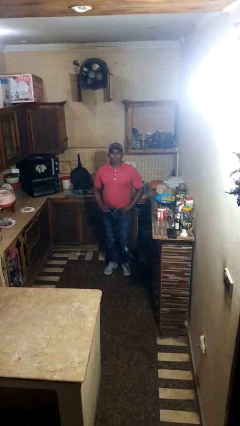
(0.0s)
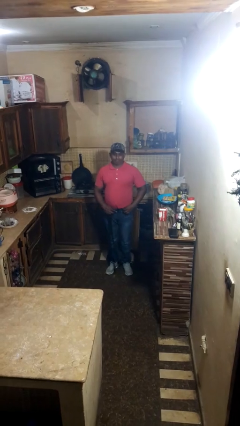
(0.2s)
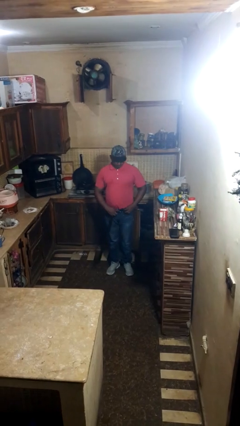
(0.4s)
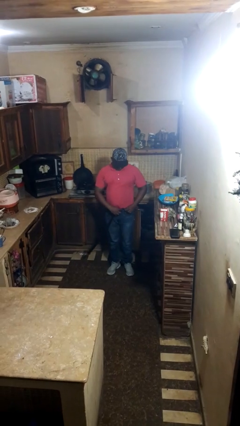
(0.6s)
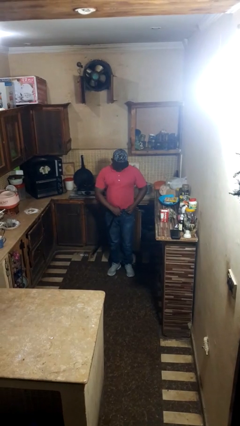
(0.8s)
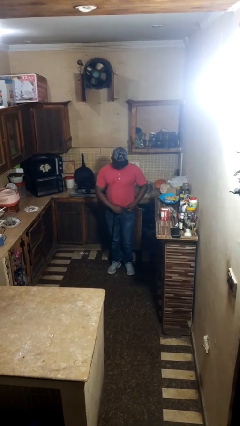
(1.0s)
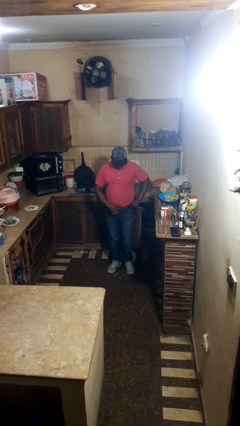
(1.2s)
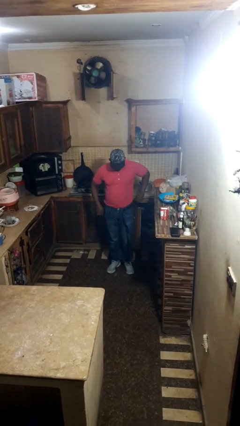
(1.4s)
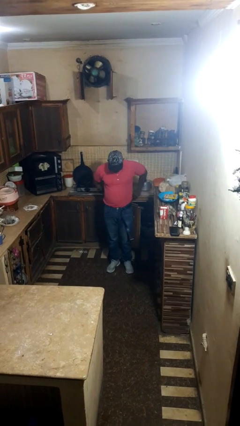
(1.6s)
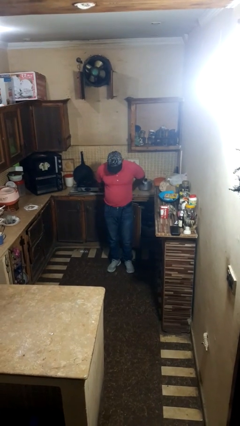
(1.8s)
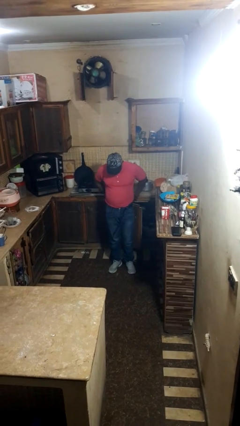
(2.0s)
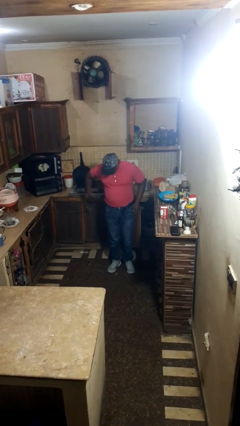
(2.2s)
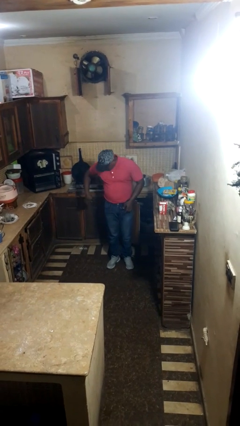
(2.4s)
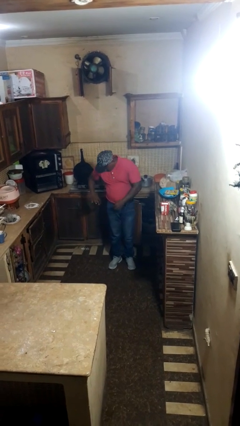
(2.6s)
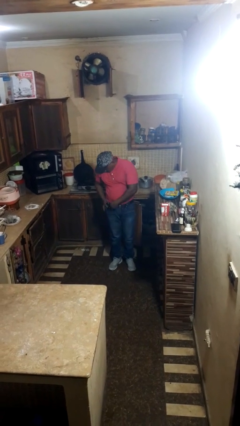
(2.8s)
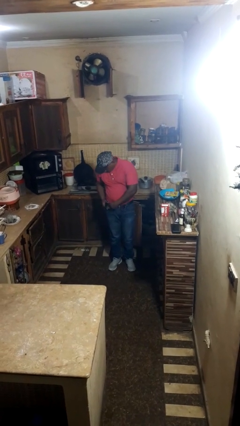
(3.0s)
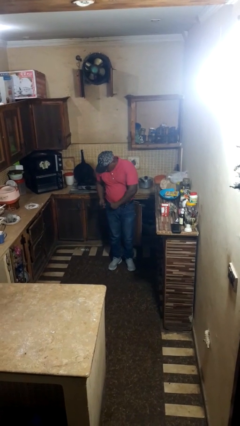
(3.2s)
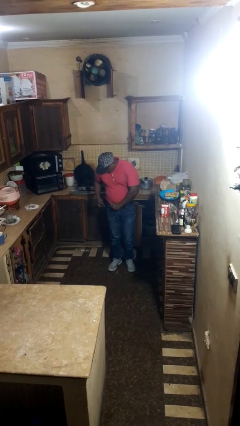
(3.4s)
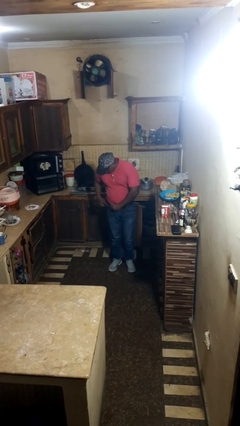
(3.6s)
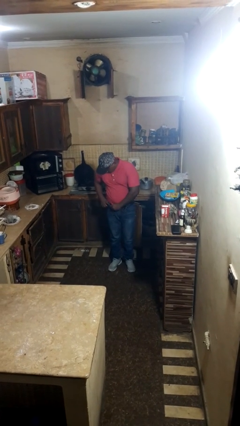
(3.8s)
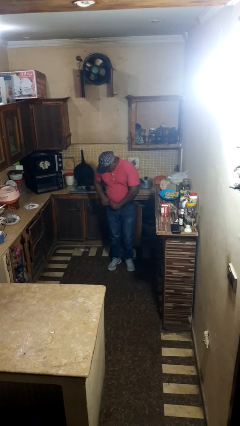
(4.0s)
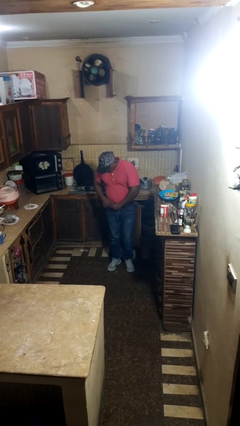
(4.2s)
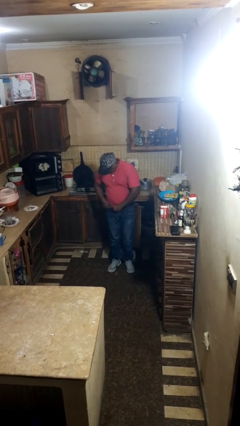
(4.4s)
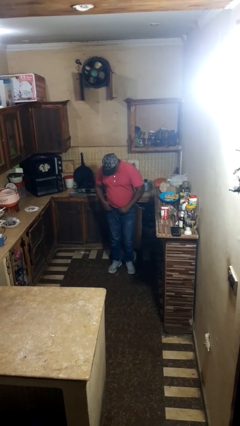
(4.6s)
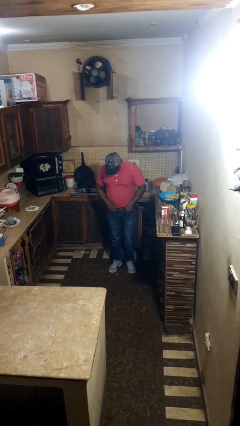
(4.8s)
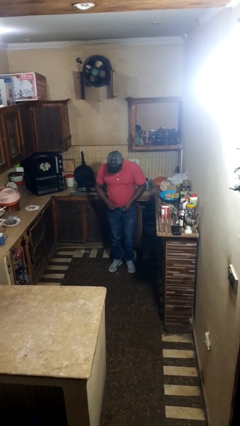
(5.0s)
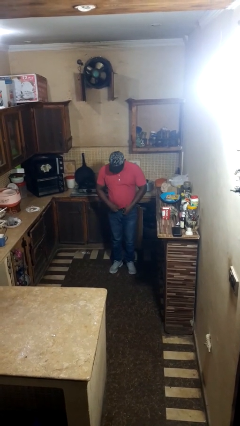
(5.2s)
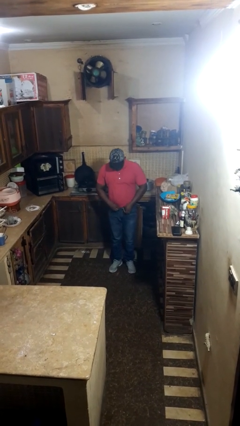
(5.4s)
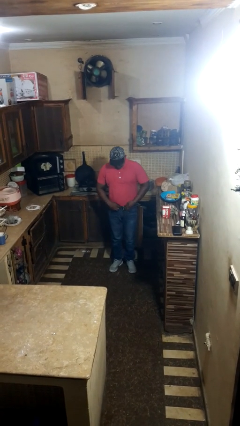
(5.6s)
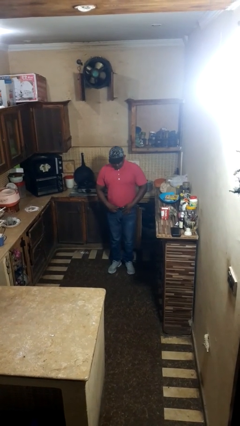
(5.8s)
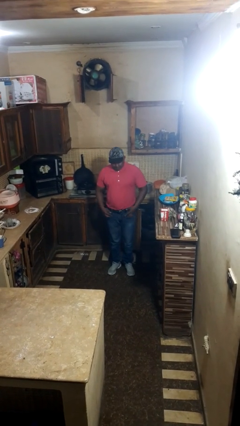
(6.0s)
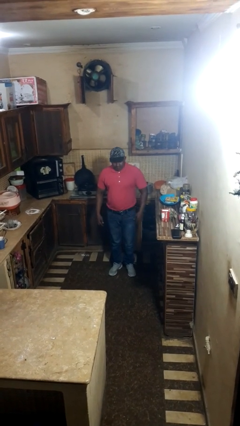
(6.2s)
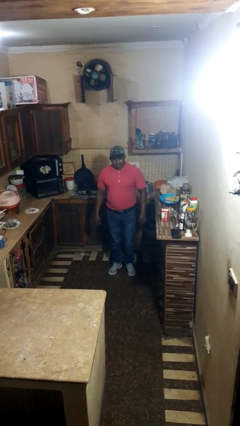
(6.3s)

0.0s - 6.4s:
person puts on belt

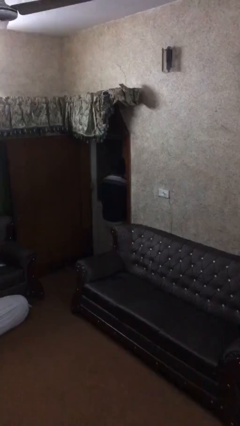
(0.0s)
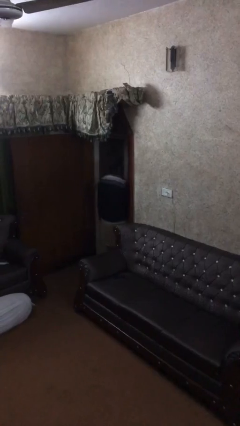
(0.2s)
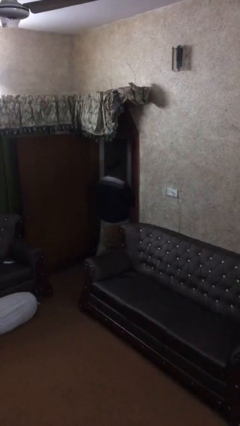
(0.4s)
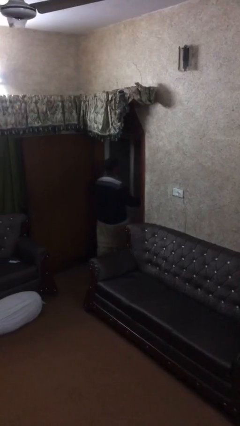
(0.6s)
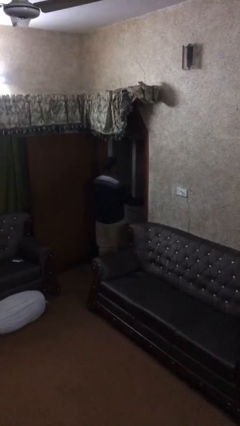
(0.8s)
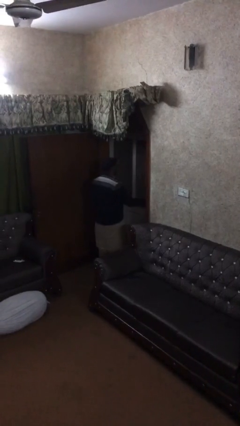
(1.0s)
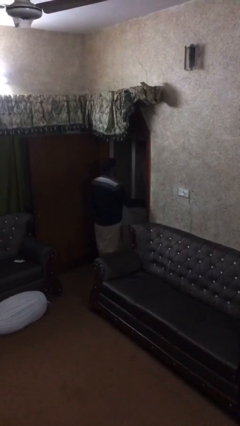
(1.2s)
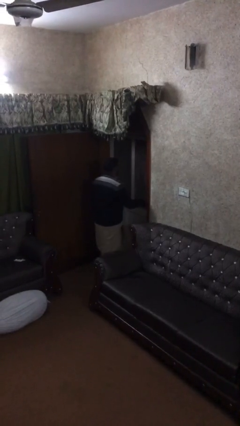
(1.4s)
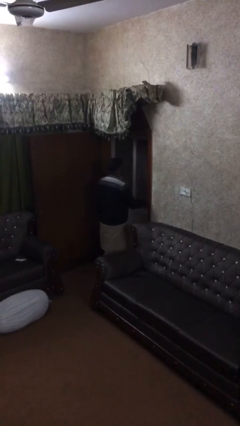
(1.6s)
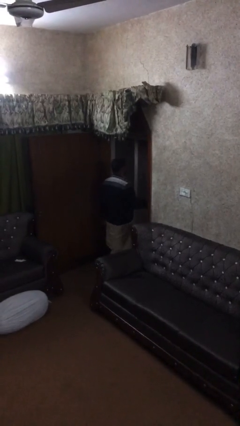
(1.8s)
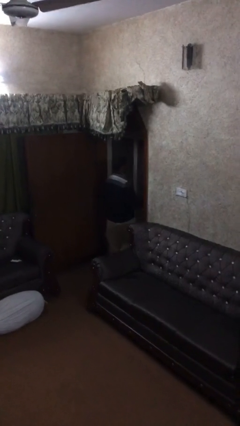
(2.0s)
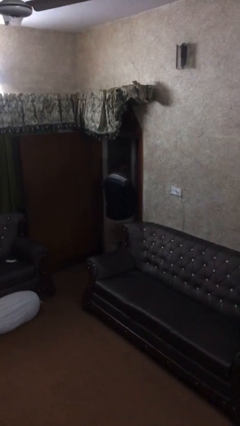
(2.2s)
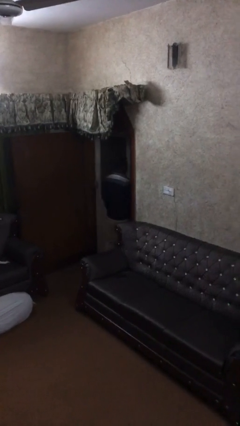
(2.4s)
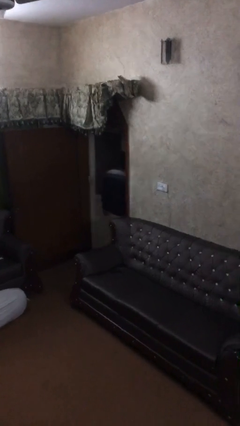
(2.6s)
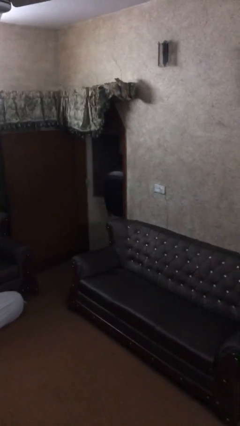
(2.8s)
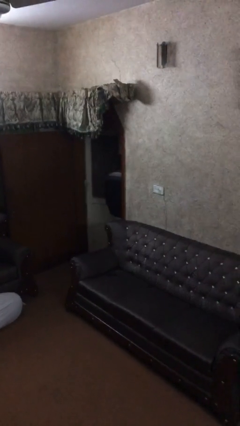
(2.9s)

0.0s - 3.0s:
person closes facility door

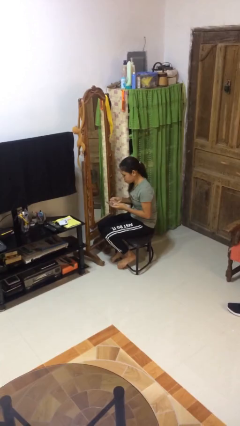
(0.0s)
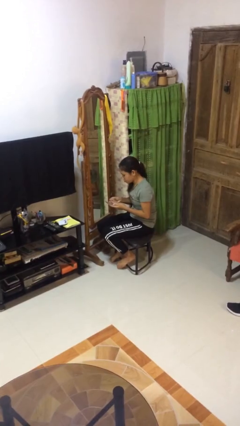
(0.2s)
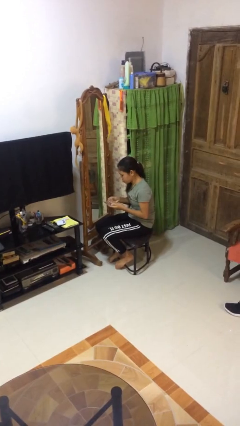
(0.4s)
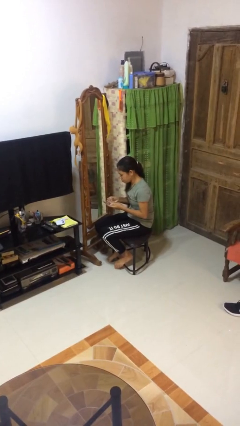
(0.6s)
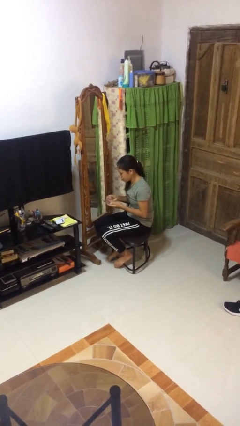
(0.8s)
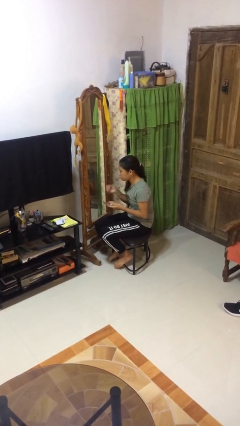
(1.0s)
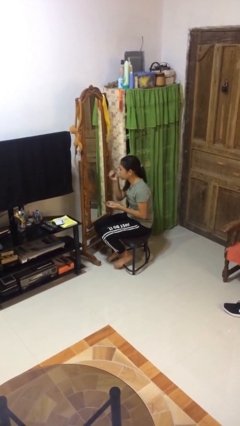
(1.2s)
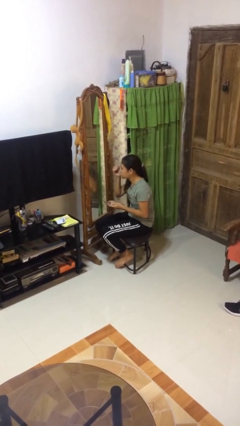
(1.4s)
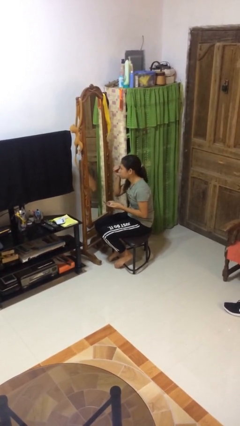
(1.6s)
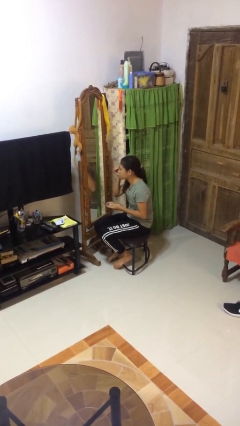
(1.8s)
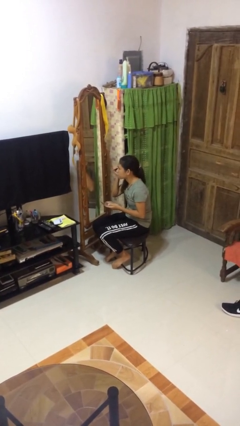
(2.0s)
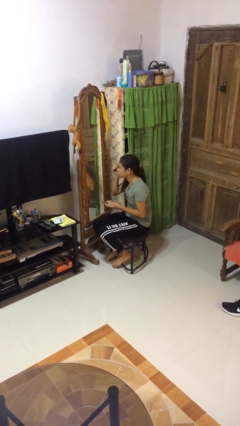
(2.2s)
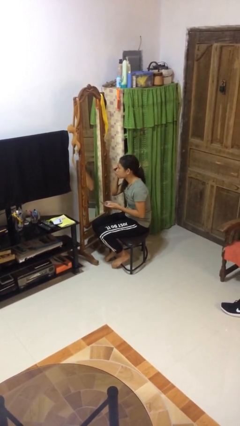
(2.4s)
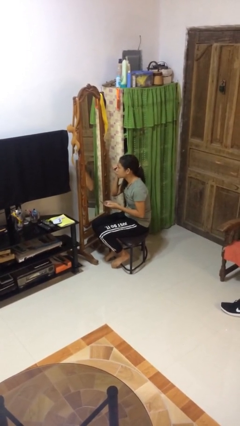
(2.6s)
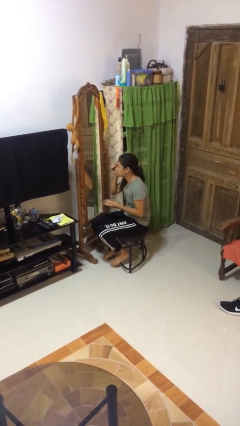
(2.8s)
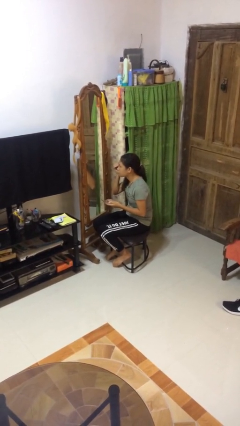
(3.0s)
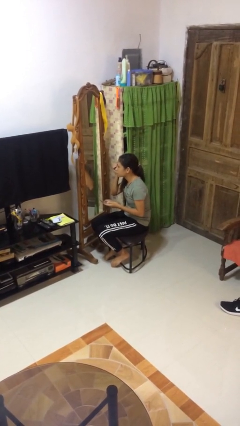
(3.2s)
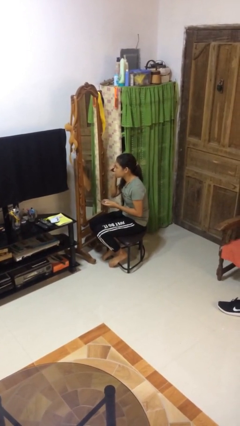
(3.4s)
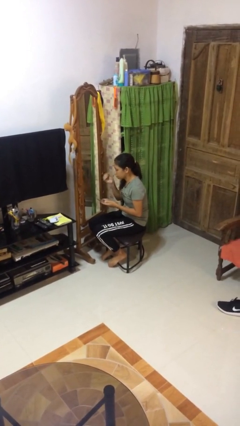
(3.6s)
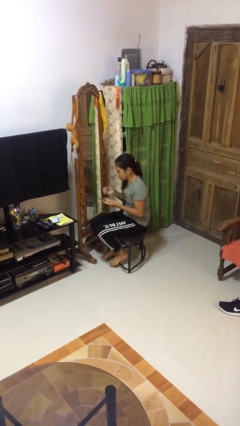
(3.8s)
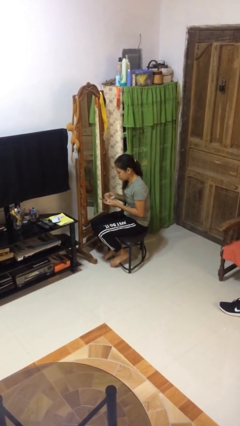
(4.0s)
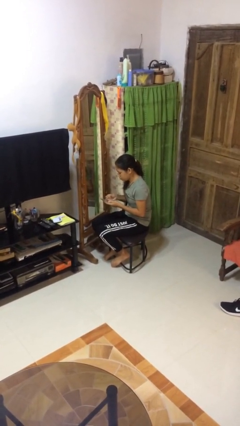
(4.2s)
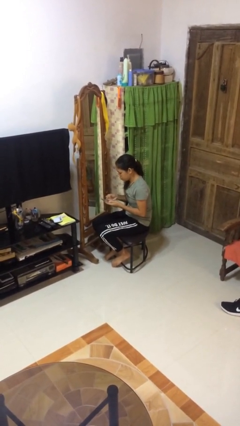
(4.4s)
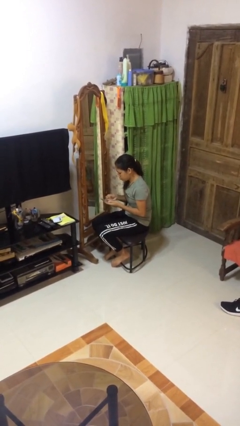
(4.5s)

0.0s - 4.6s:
person applies eye makeup

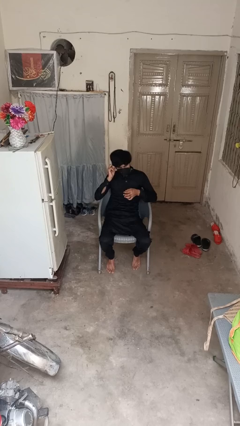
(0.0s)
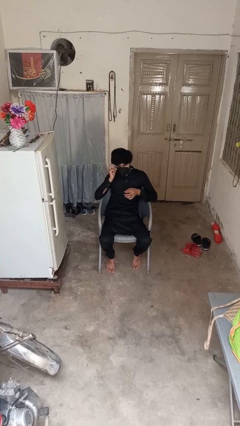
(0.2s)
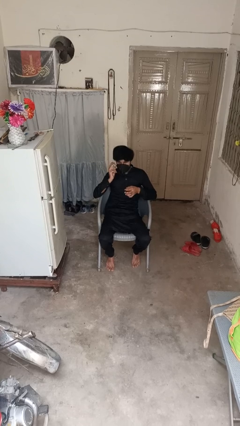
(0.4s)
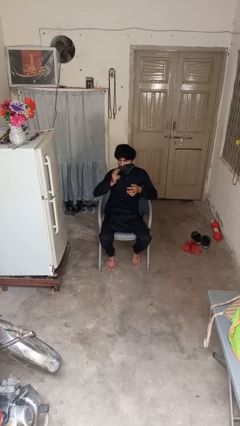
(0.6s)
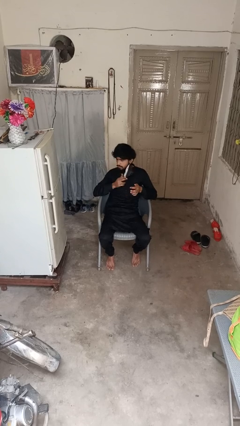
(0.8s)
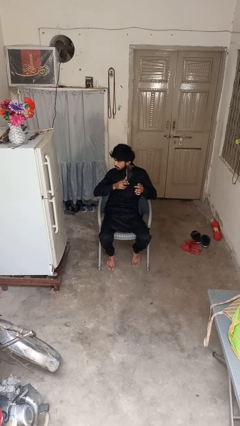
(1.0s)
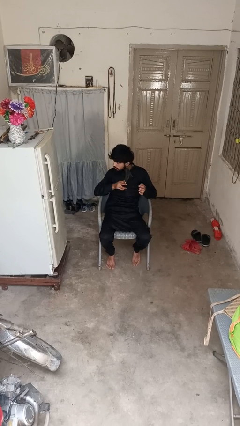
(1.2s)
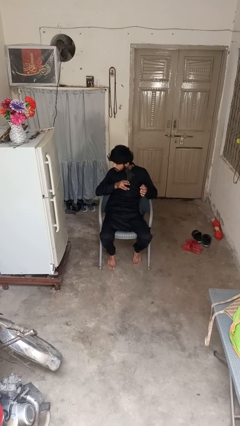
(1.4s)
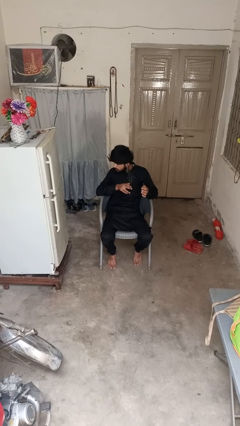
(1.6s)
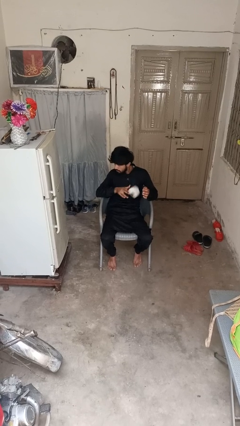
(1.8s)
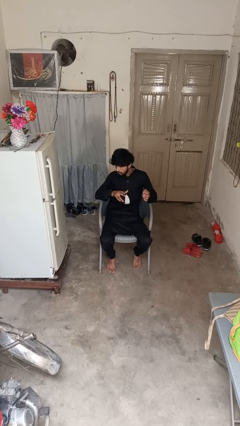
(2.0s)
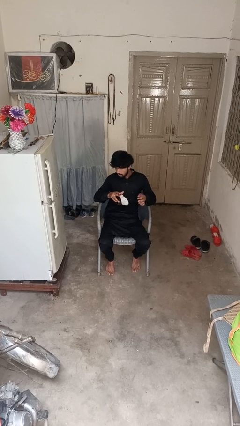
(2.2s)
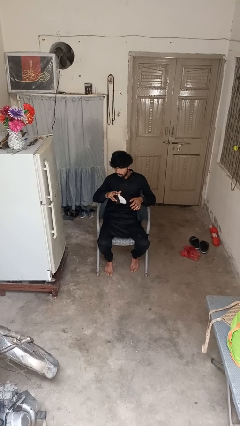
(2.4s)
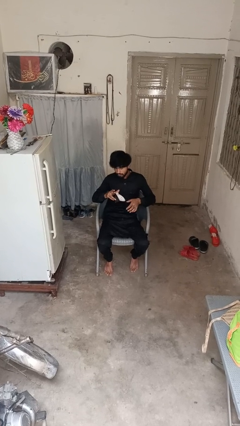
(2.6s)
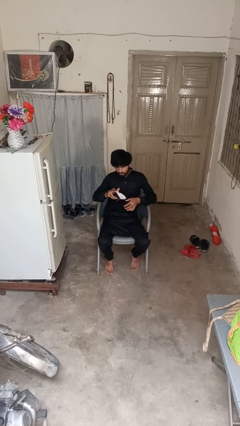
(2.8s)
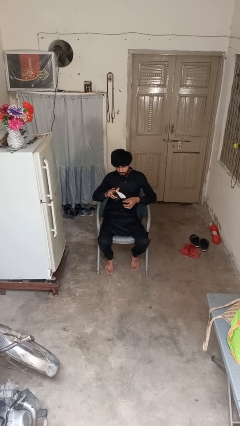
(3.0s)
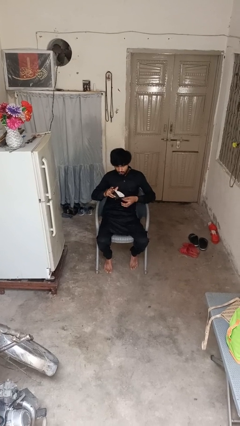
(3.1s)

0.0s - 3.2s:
person takes off facemask

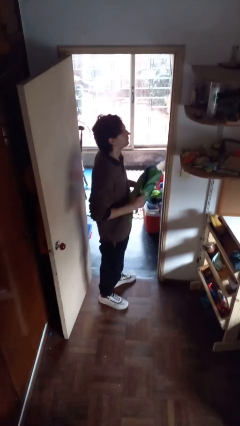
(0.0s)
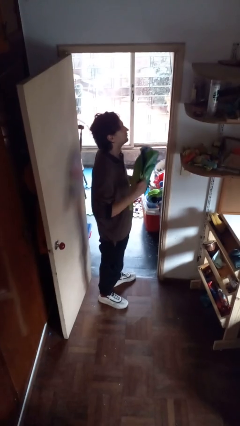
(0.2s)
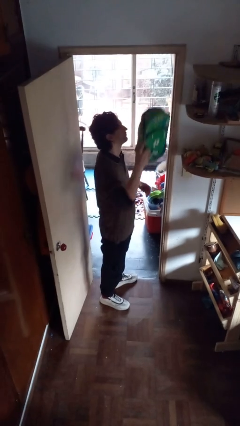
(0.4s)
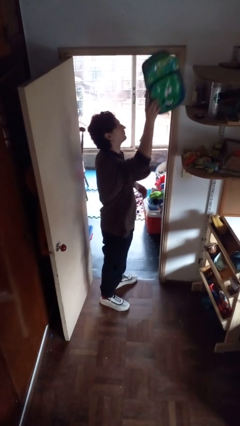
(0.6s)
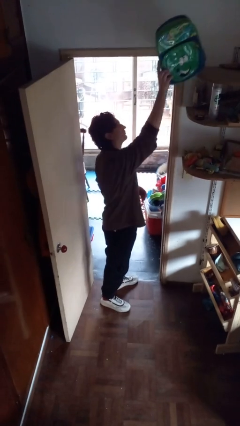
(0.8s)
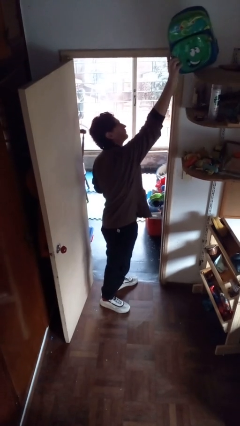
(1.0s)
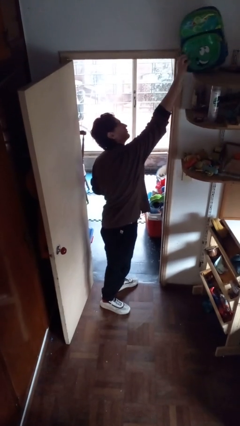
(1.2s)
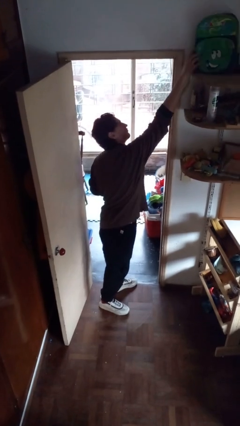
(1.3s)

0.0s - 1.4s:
person picks up object from shelf
